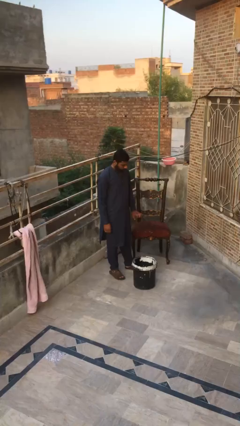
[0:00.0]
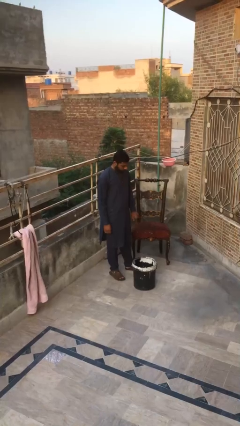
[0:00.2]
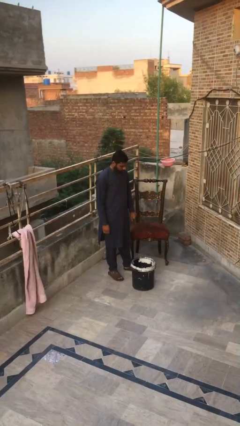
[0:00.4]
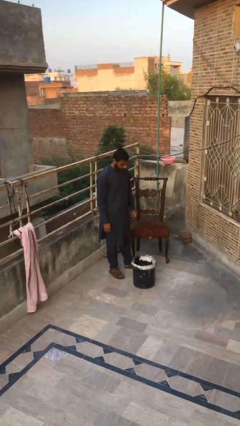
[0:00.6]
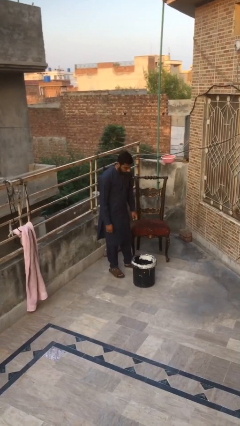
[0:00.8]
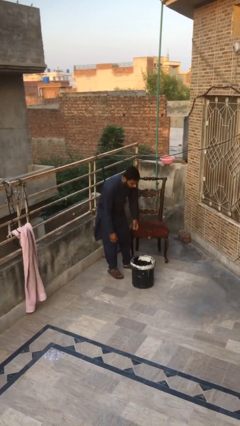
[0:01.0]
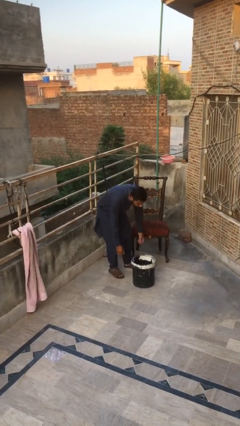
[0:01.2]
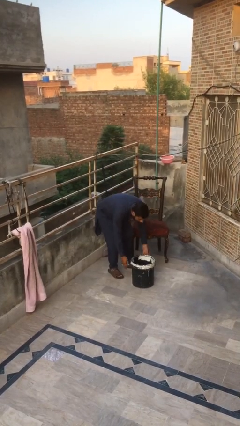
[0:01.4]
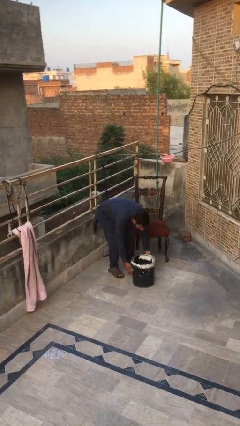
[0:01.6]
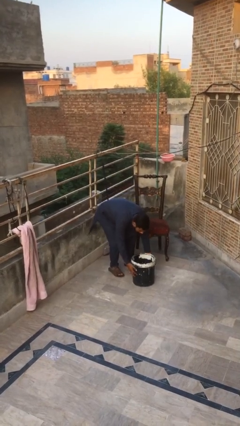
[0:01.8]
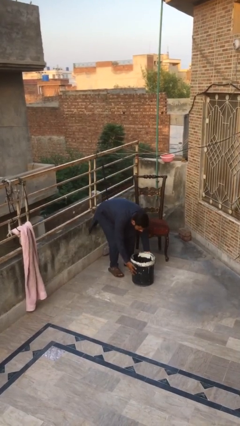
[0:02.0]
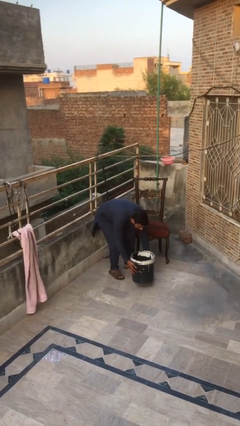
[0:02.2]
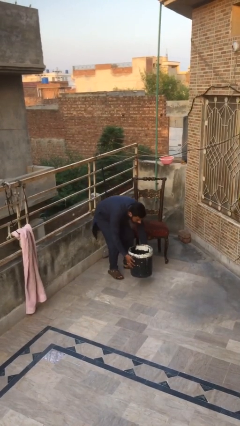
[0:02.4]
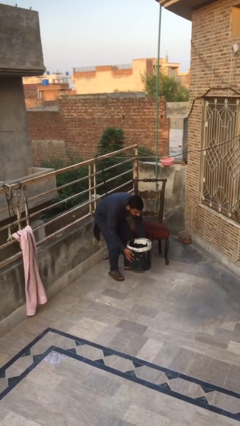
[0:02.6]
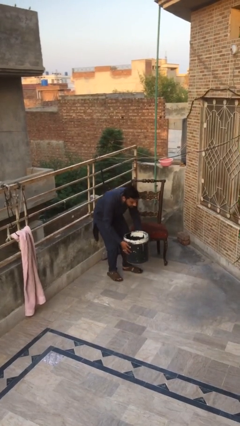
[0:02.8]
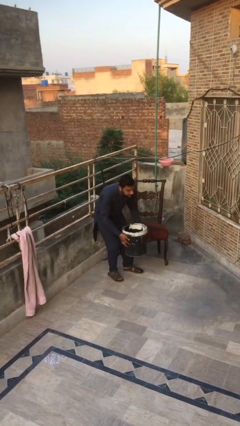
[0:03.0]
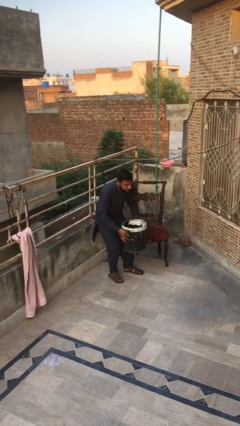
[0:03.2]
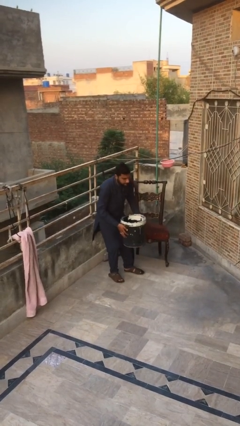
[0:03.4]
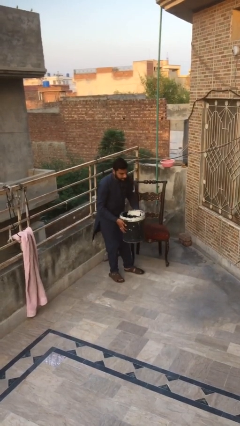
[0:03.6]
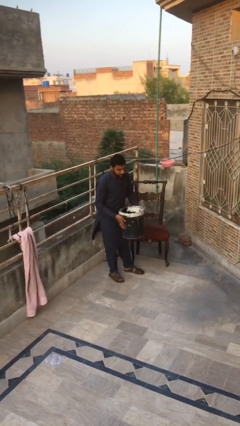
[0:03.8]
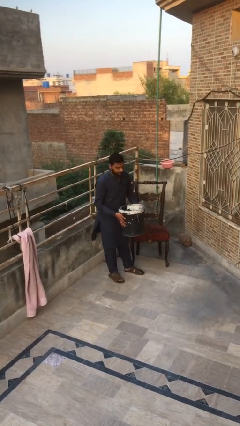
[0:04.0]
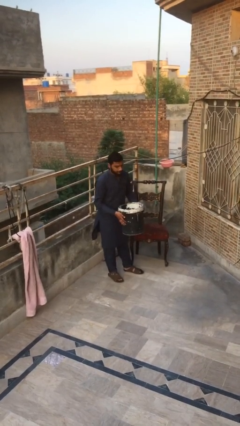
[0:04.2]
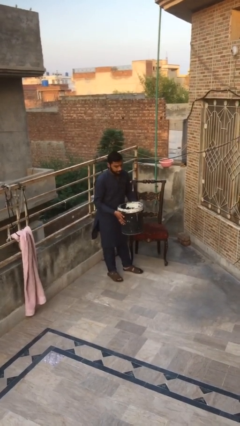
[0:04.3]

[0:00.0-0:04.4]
person picks up object from floor

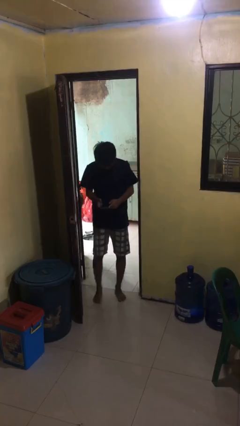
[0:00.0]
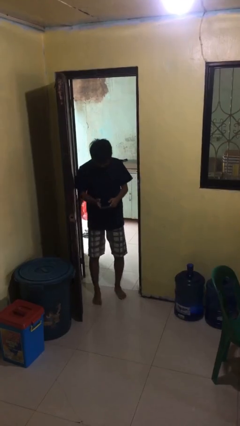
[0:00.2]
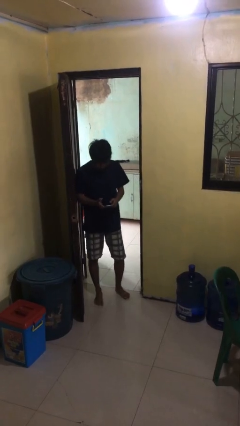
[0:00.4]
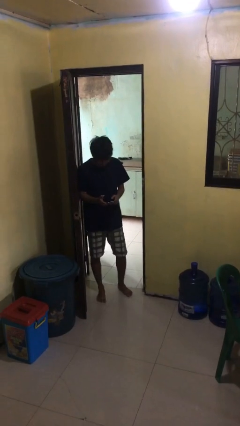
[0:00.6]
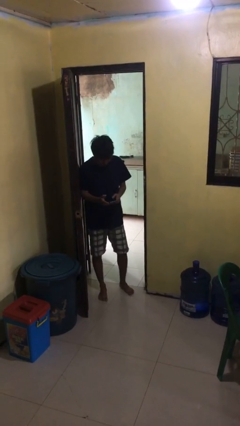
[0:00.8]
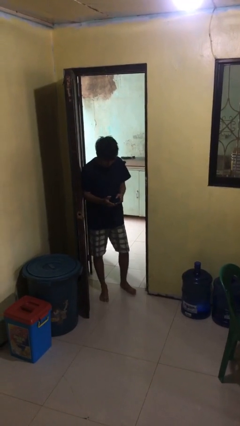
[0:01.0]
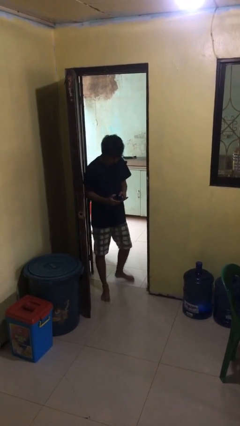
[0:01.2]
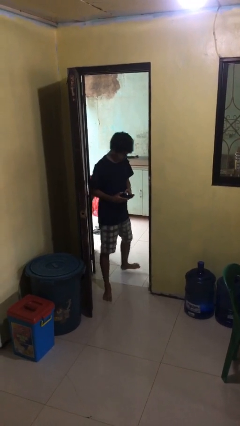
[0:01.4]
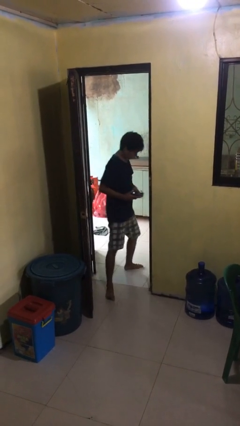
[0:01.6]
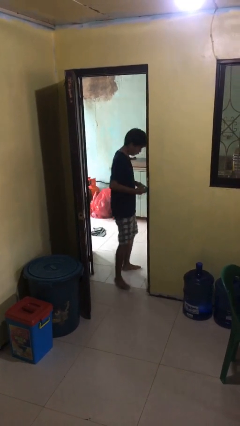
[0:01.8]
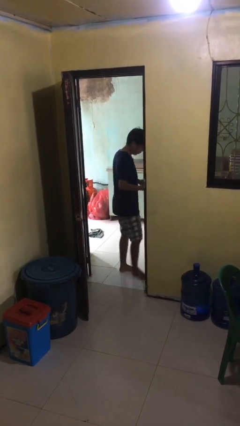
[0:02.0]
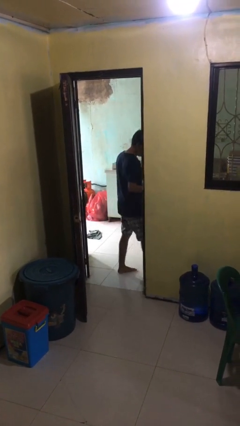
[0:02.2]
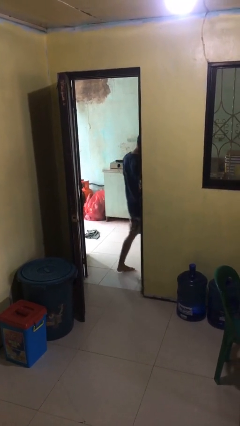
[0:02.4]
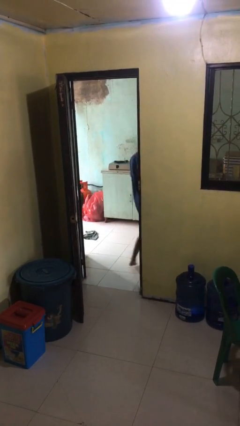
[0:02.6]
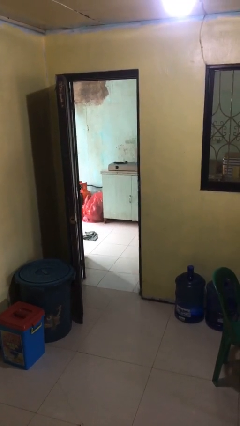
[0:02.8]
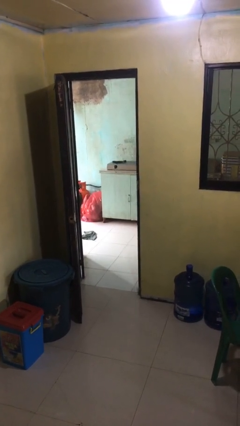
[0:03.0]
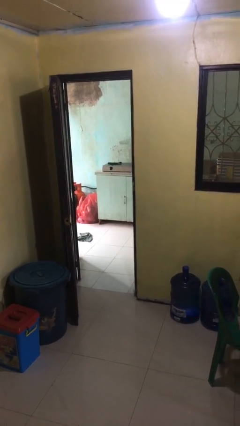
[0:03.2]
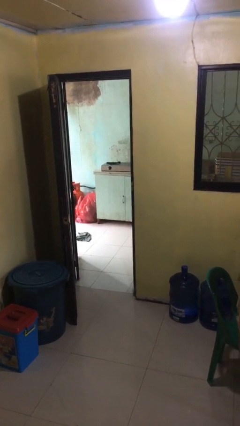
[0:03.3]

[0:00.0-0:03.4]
person exits scene through structure

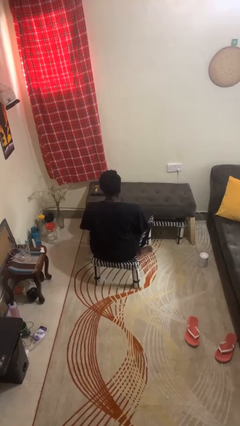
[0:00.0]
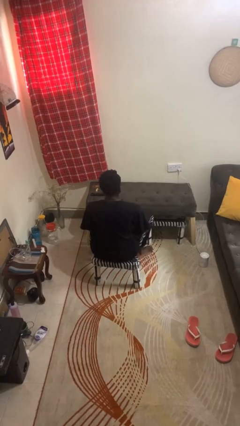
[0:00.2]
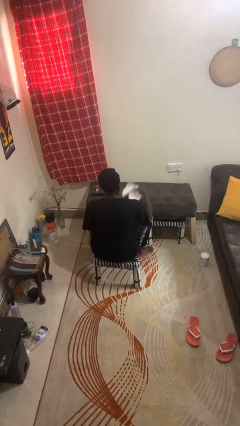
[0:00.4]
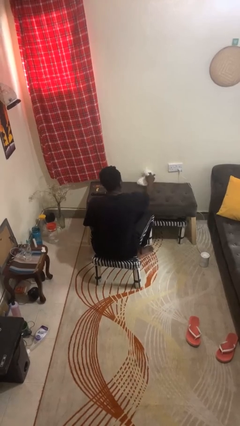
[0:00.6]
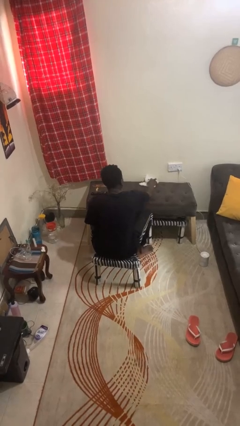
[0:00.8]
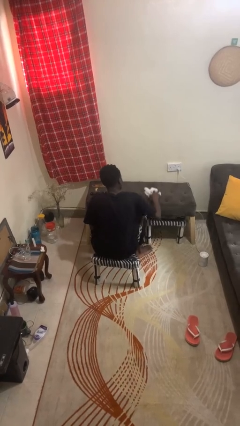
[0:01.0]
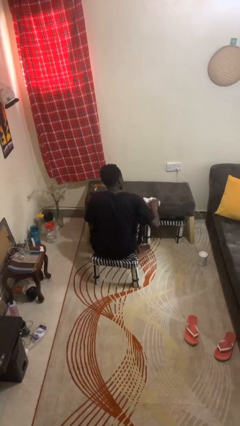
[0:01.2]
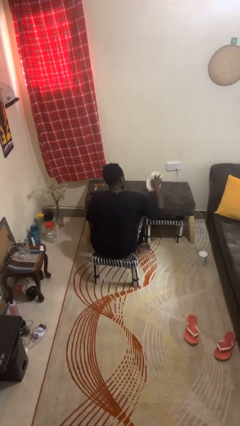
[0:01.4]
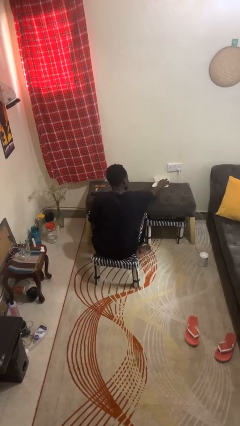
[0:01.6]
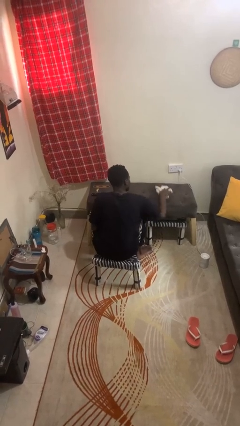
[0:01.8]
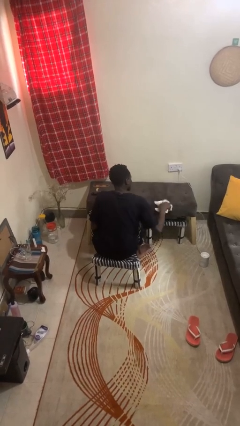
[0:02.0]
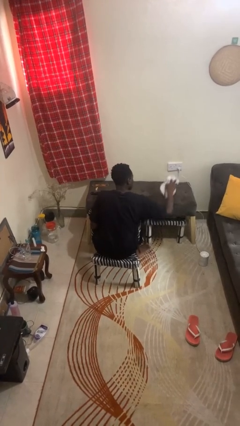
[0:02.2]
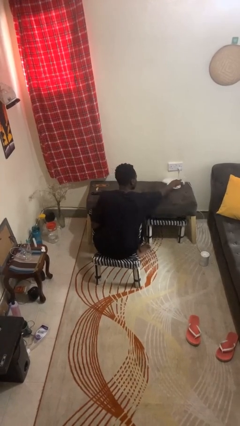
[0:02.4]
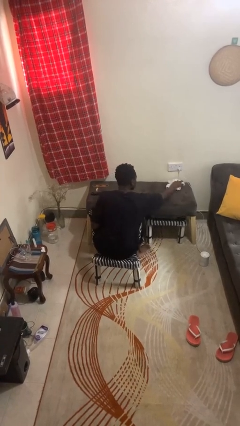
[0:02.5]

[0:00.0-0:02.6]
person cleans table with rag

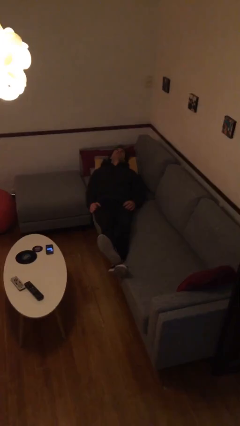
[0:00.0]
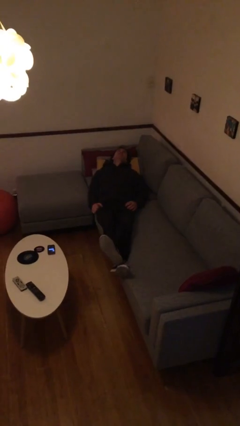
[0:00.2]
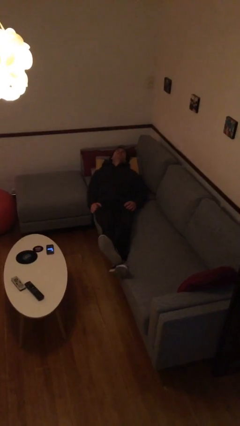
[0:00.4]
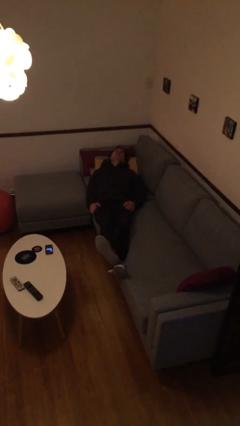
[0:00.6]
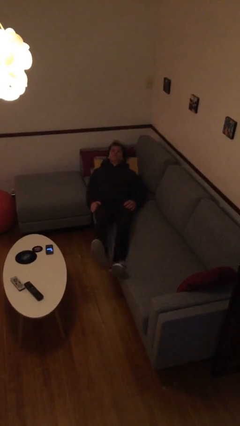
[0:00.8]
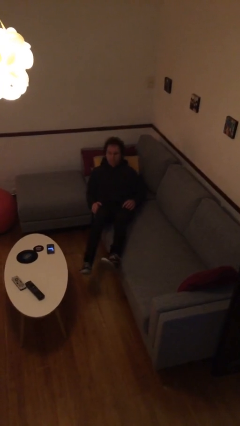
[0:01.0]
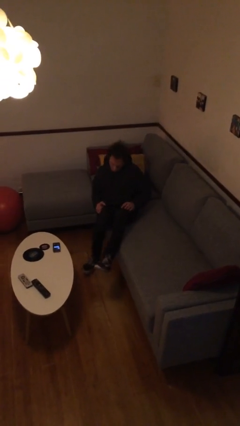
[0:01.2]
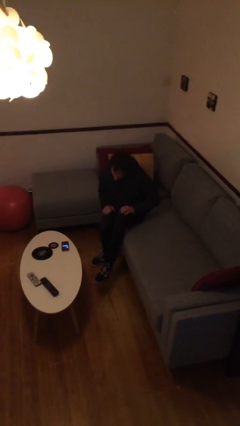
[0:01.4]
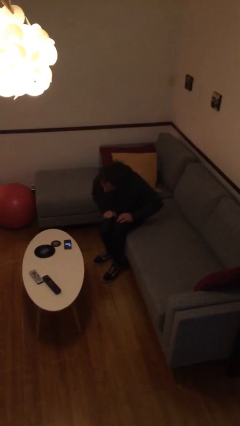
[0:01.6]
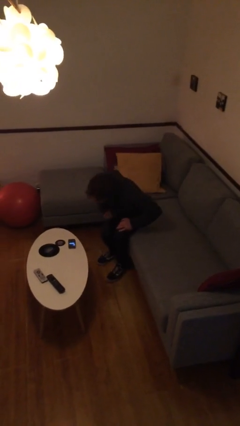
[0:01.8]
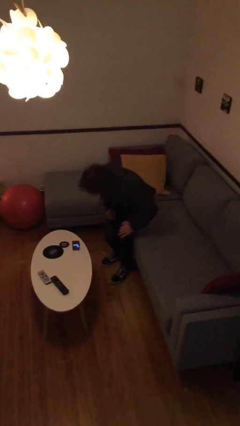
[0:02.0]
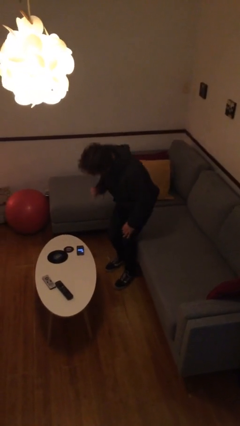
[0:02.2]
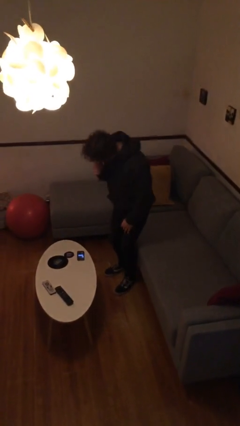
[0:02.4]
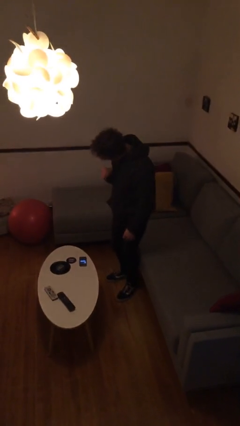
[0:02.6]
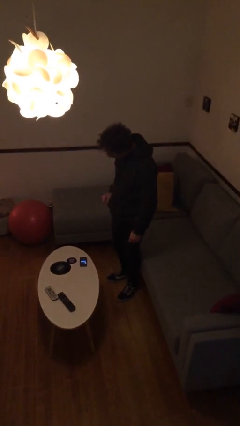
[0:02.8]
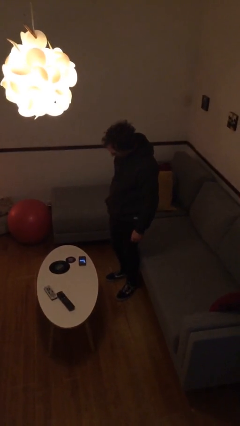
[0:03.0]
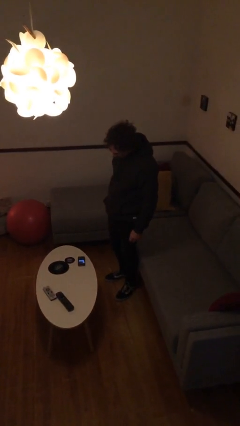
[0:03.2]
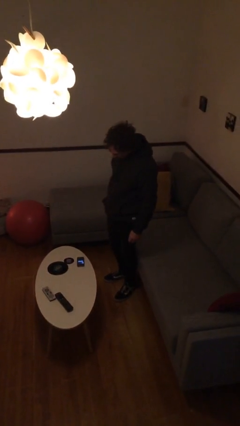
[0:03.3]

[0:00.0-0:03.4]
person stands up

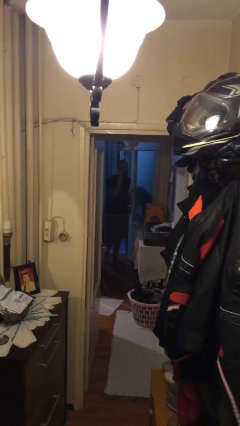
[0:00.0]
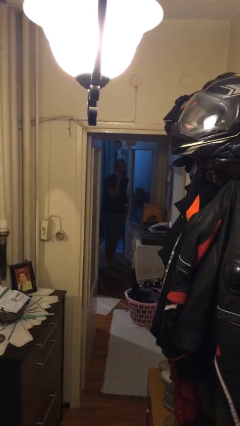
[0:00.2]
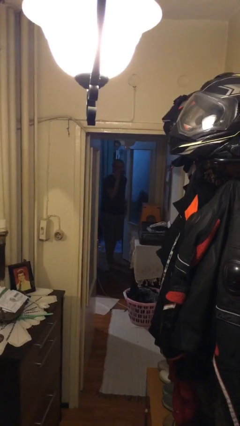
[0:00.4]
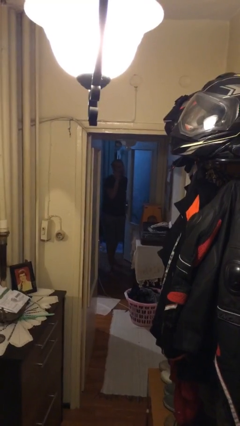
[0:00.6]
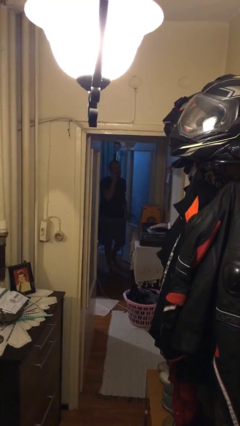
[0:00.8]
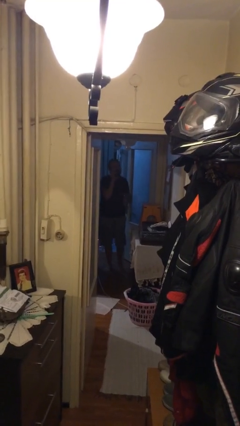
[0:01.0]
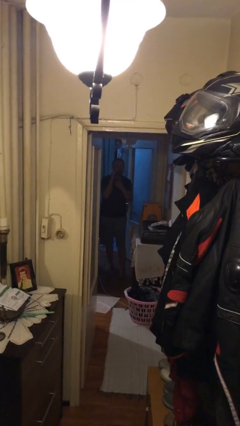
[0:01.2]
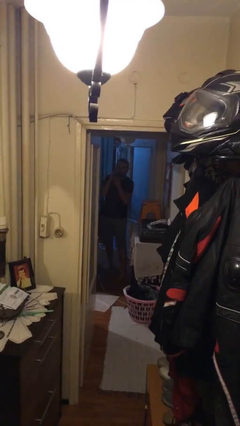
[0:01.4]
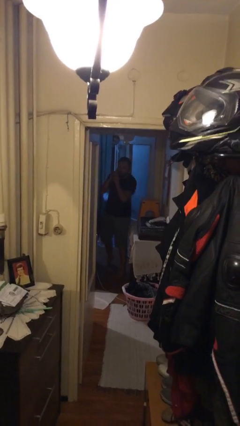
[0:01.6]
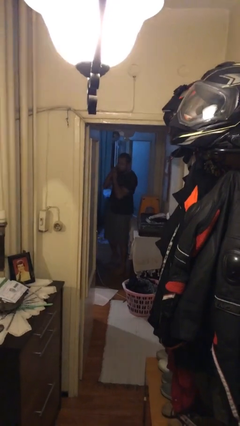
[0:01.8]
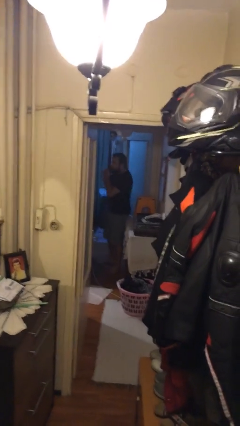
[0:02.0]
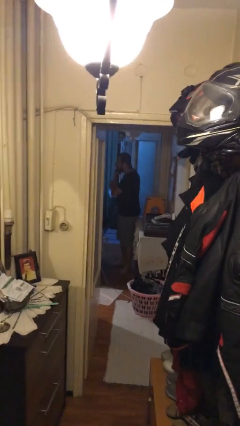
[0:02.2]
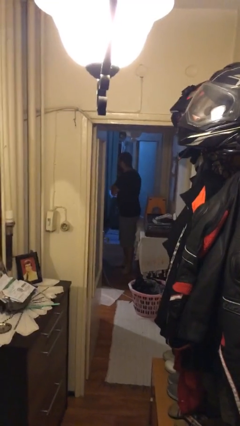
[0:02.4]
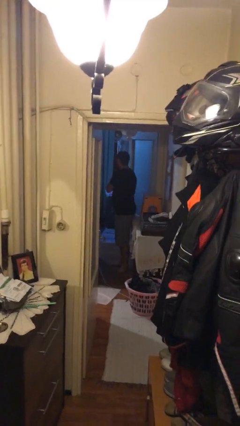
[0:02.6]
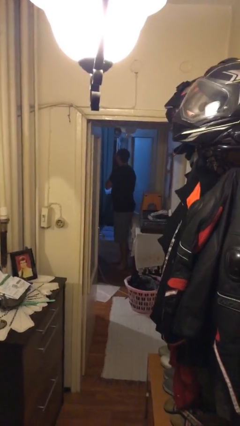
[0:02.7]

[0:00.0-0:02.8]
person enters scene through structure

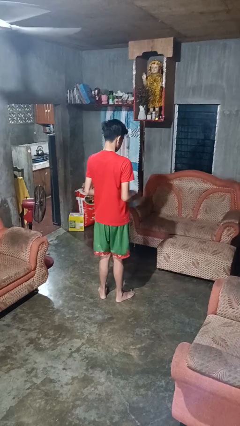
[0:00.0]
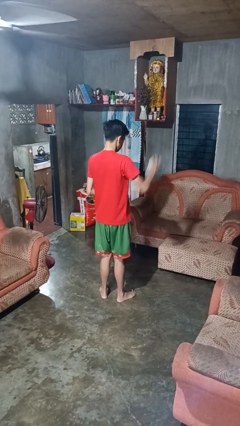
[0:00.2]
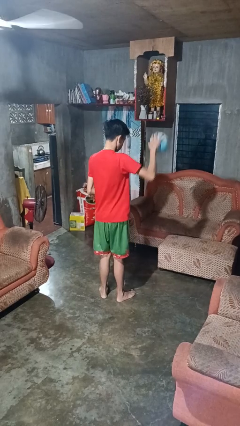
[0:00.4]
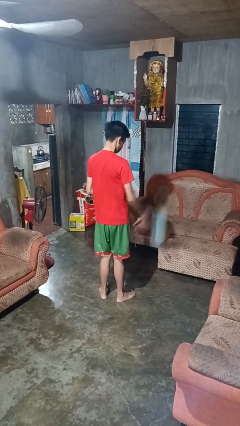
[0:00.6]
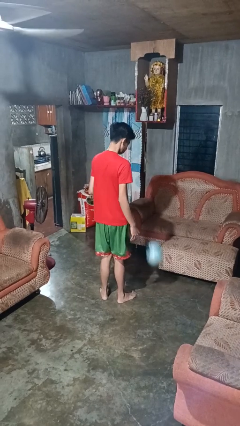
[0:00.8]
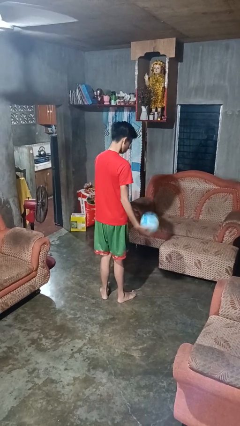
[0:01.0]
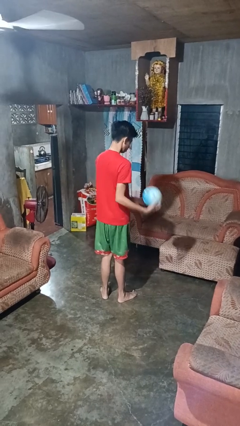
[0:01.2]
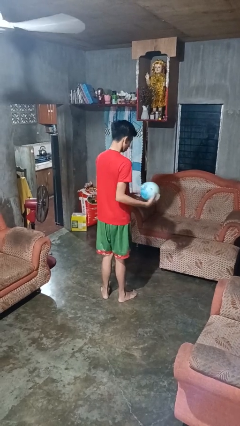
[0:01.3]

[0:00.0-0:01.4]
person bounces ball on floor
